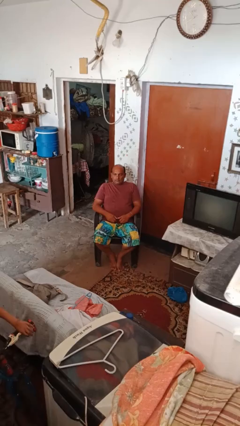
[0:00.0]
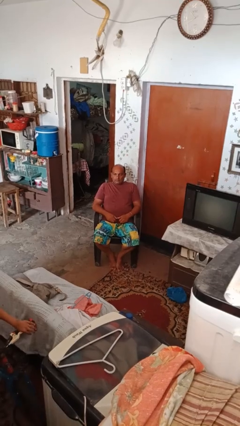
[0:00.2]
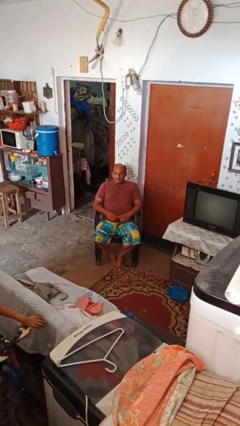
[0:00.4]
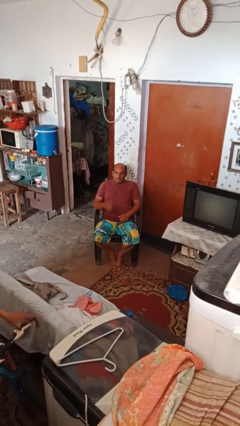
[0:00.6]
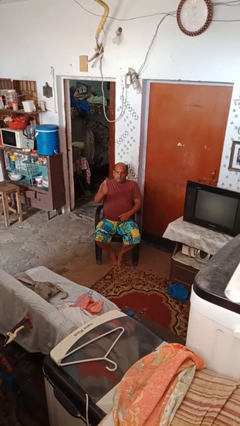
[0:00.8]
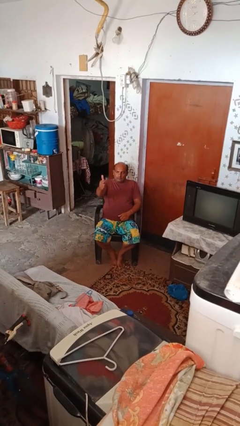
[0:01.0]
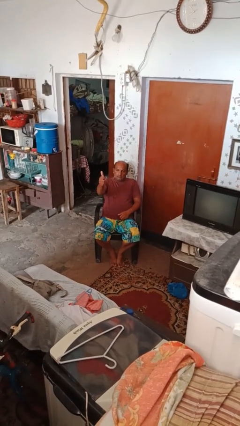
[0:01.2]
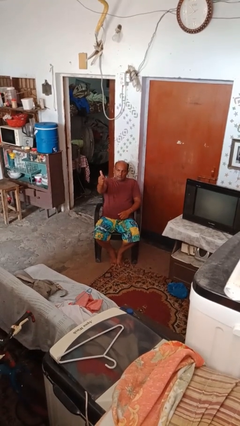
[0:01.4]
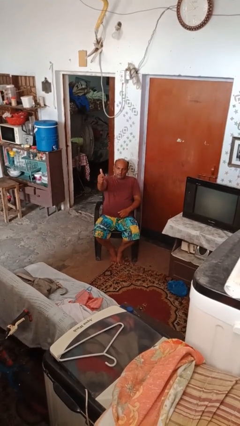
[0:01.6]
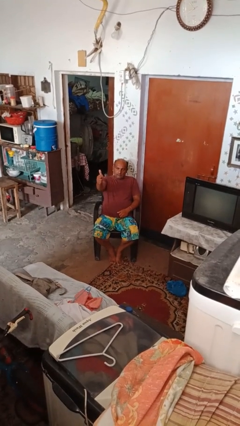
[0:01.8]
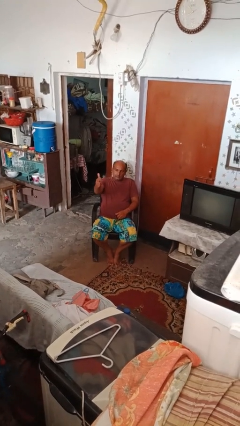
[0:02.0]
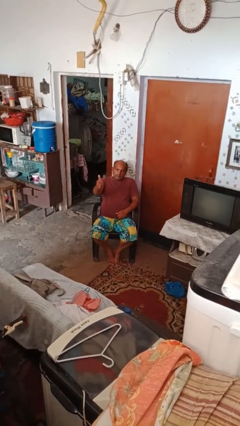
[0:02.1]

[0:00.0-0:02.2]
person gestures thumbs up

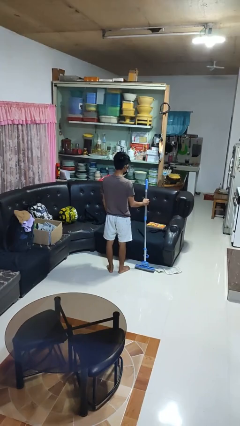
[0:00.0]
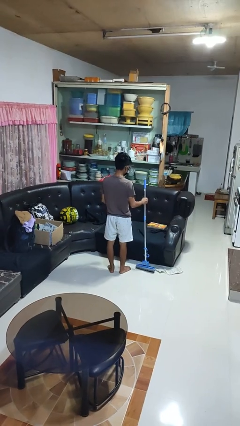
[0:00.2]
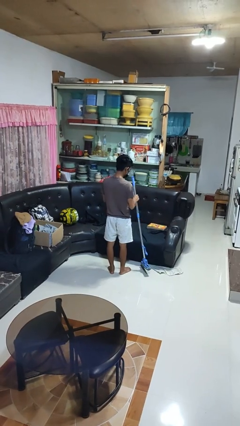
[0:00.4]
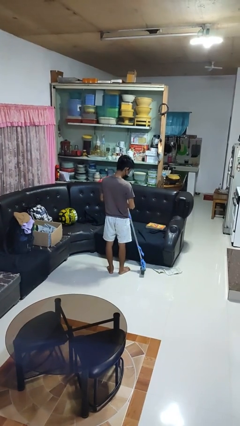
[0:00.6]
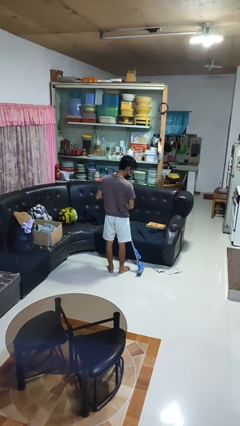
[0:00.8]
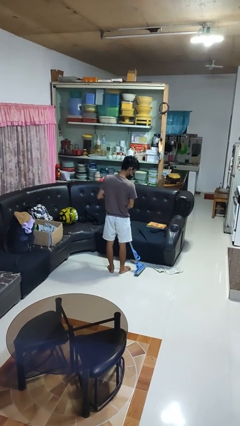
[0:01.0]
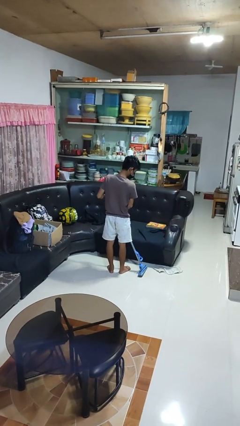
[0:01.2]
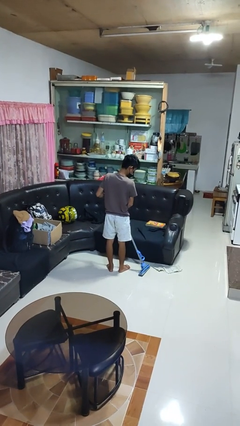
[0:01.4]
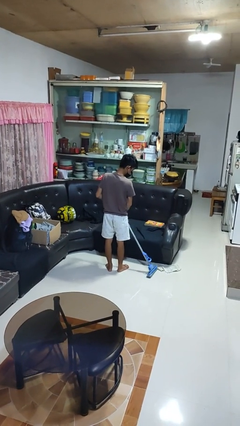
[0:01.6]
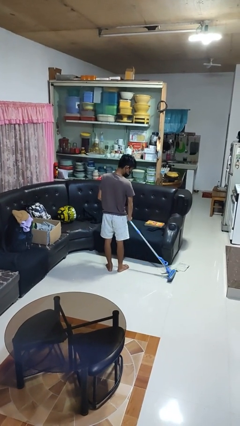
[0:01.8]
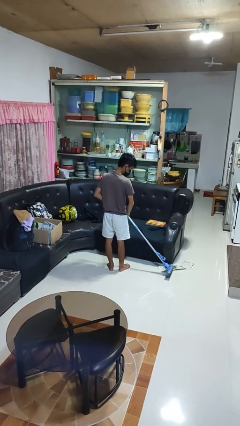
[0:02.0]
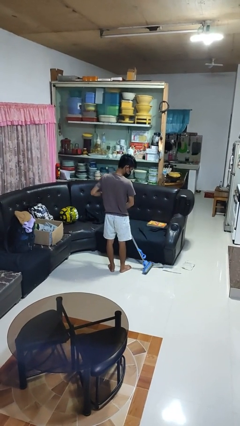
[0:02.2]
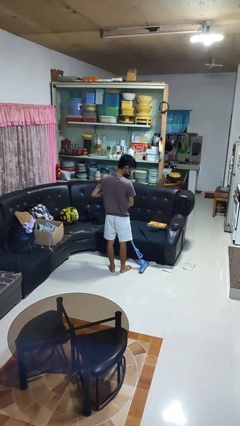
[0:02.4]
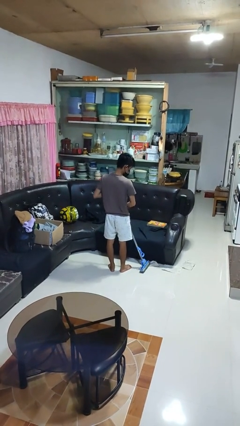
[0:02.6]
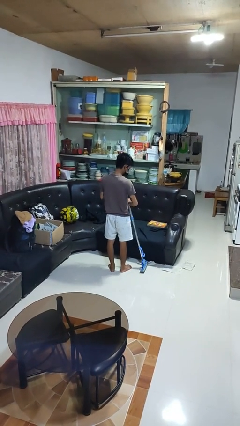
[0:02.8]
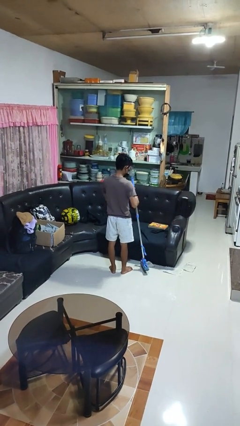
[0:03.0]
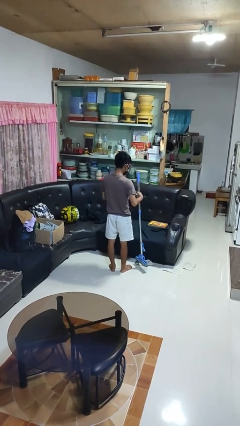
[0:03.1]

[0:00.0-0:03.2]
person mops

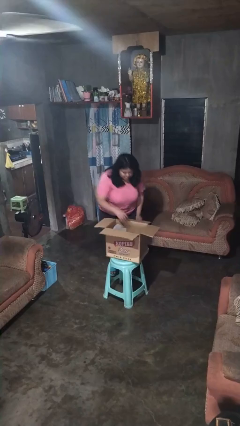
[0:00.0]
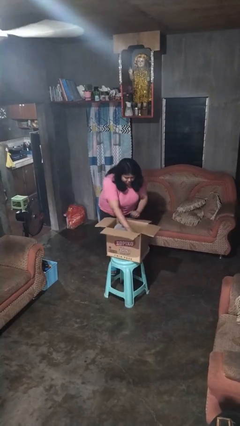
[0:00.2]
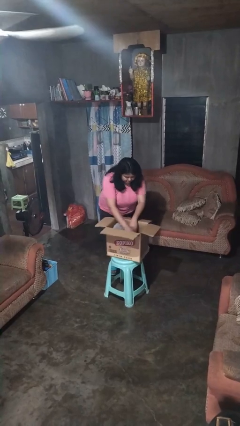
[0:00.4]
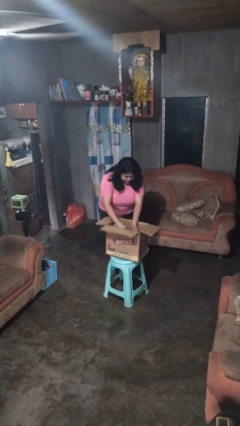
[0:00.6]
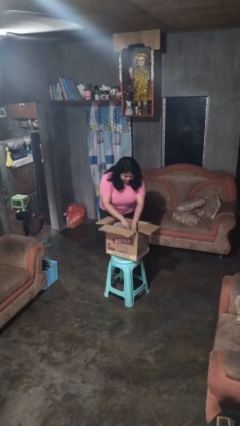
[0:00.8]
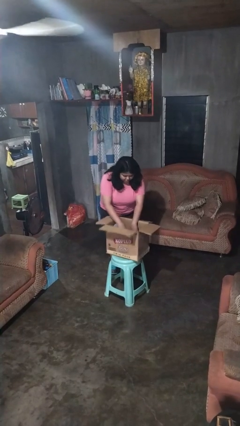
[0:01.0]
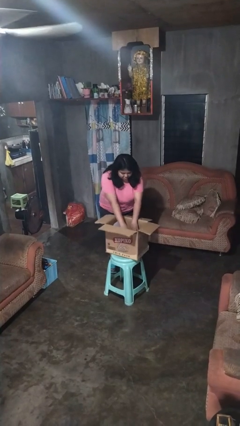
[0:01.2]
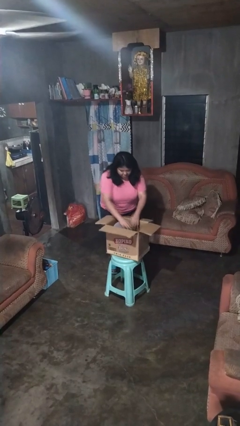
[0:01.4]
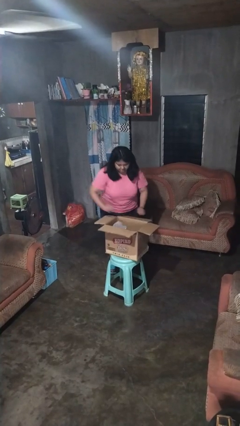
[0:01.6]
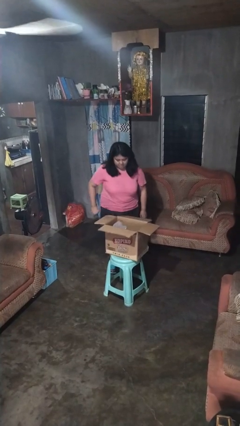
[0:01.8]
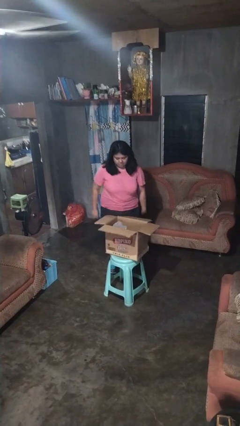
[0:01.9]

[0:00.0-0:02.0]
person searches in box

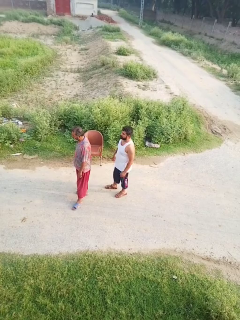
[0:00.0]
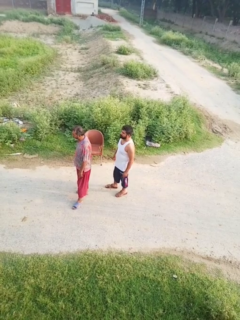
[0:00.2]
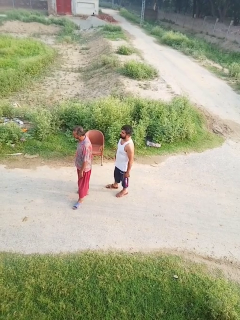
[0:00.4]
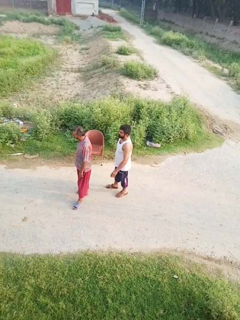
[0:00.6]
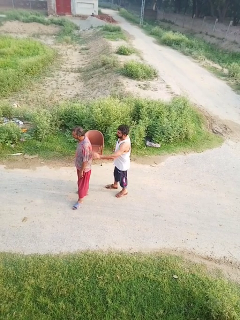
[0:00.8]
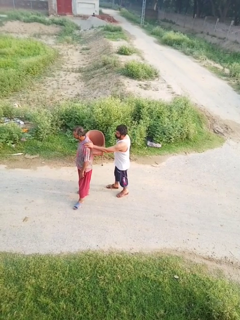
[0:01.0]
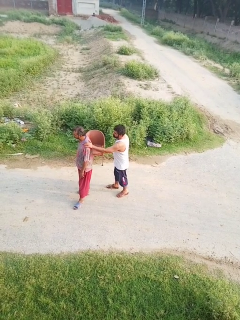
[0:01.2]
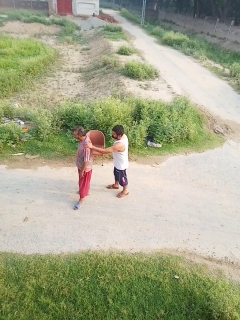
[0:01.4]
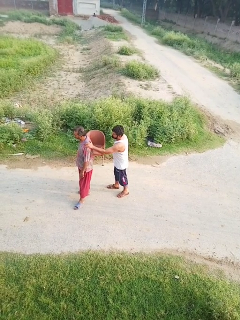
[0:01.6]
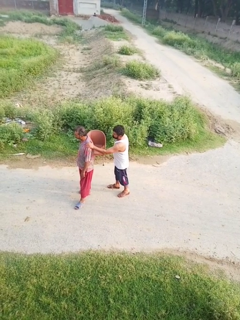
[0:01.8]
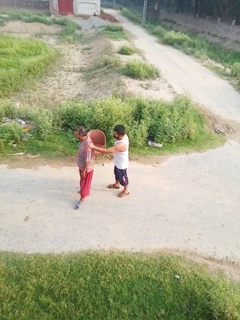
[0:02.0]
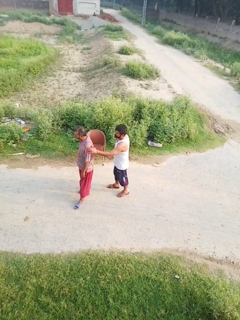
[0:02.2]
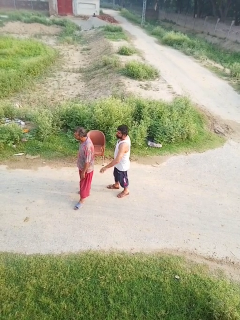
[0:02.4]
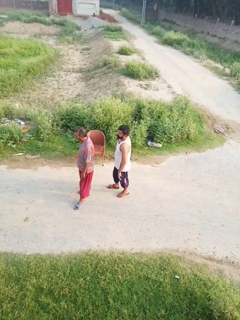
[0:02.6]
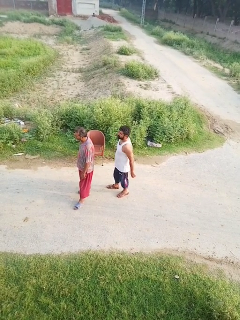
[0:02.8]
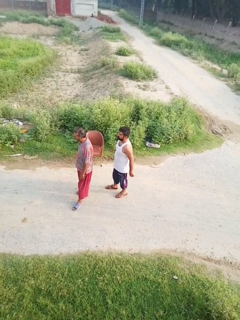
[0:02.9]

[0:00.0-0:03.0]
person touches back of person

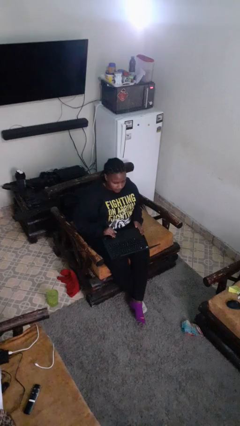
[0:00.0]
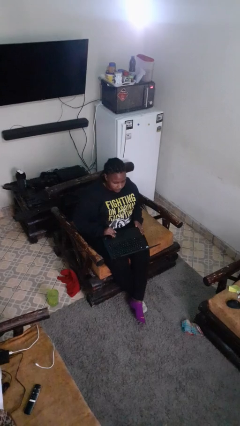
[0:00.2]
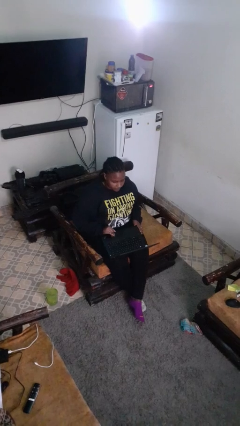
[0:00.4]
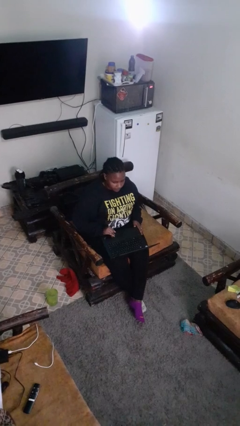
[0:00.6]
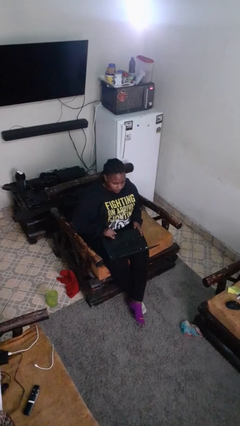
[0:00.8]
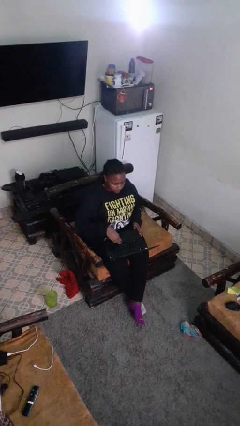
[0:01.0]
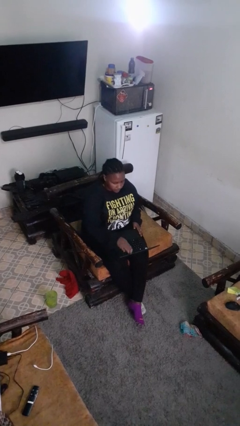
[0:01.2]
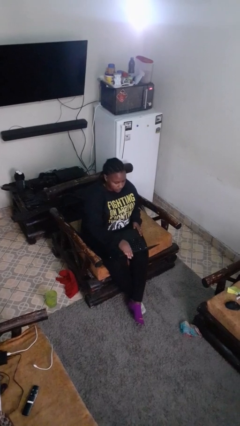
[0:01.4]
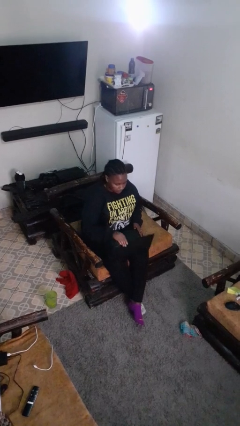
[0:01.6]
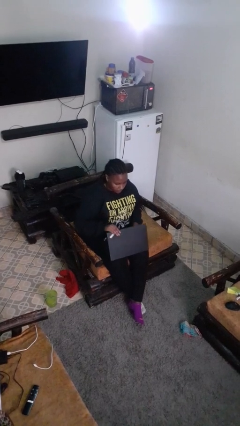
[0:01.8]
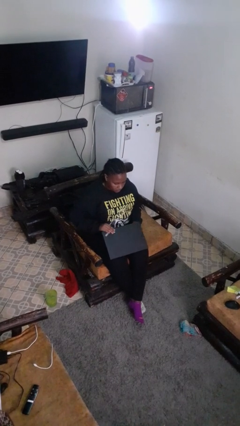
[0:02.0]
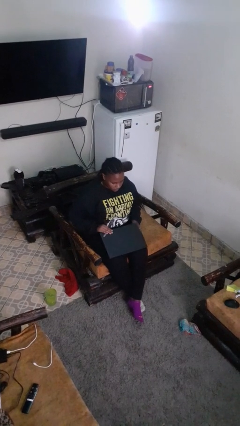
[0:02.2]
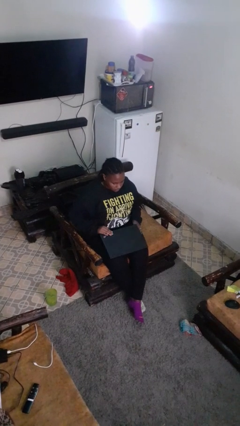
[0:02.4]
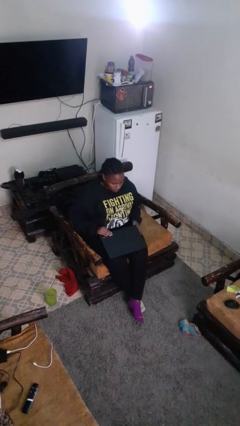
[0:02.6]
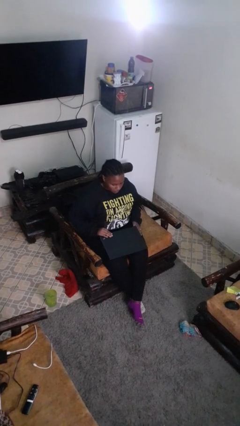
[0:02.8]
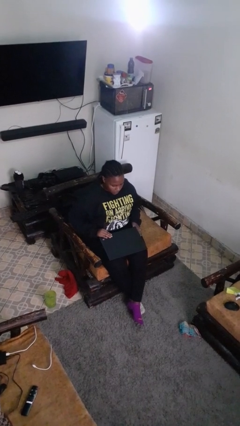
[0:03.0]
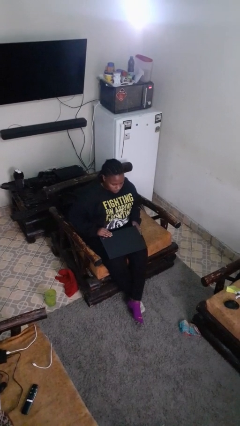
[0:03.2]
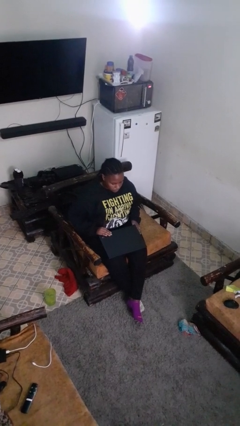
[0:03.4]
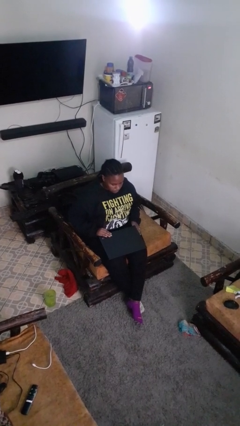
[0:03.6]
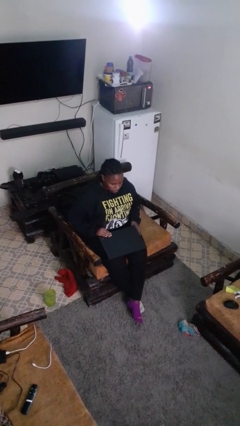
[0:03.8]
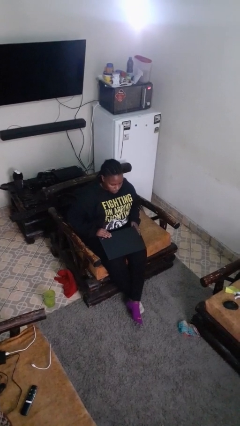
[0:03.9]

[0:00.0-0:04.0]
person closes laptop

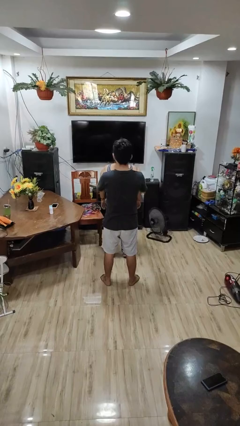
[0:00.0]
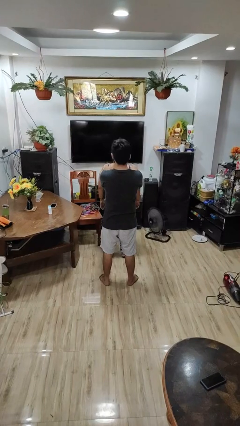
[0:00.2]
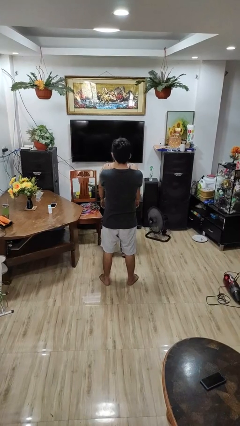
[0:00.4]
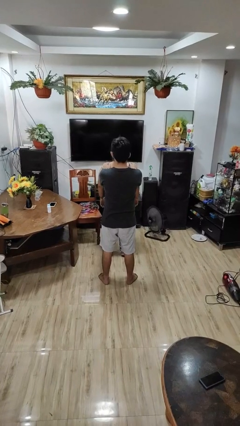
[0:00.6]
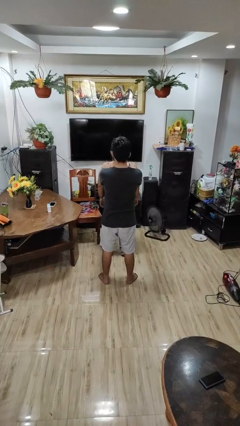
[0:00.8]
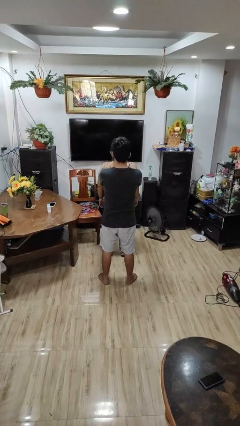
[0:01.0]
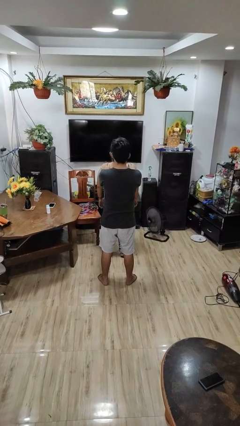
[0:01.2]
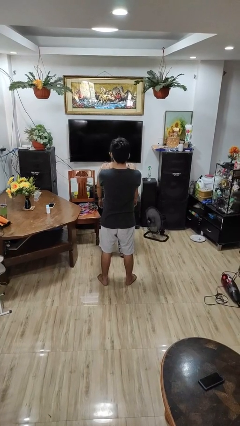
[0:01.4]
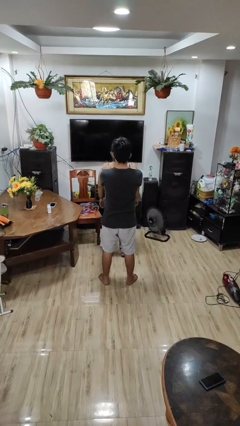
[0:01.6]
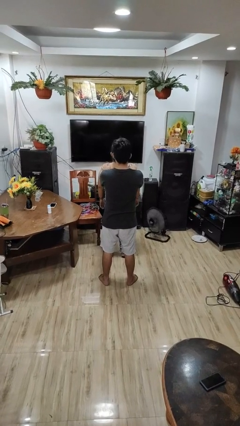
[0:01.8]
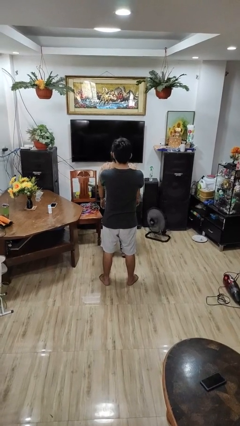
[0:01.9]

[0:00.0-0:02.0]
person grabs person by shoulder

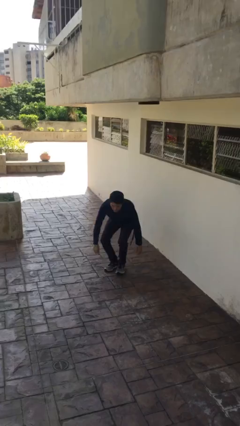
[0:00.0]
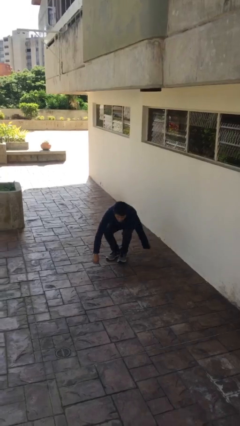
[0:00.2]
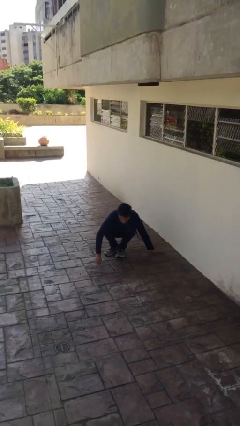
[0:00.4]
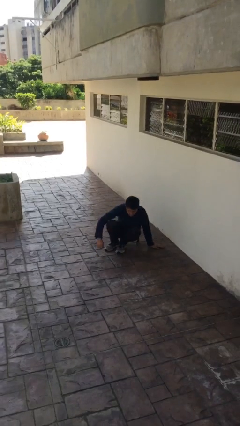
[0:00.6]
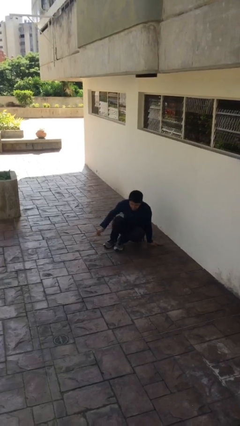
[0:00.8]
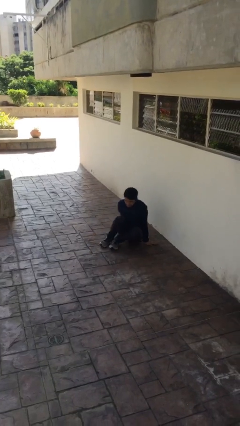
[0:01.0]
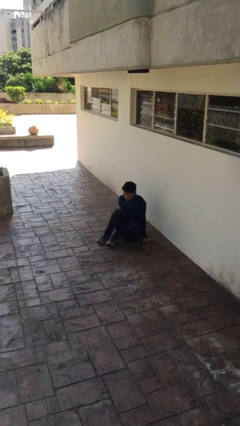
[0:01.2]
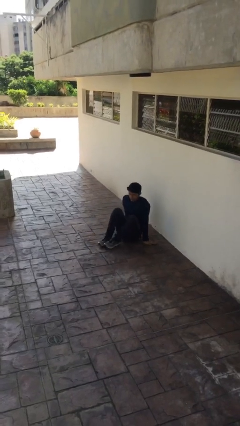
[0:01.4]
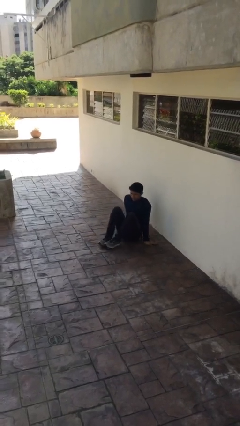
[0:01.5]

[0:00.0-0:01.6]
person sits down
